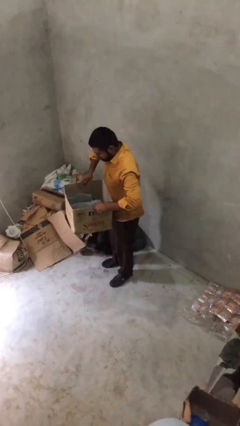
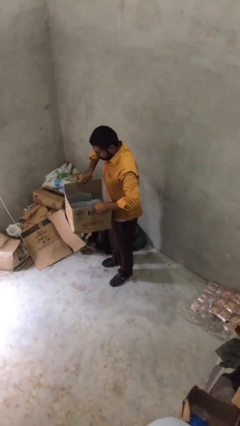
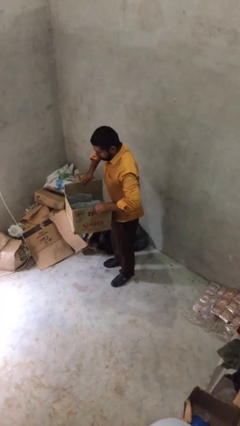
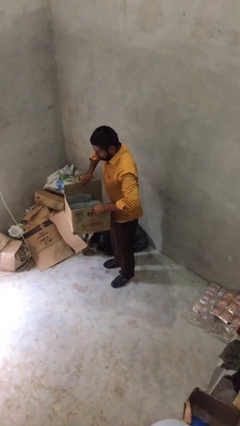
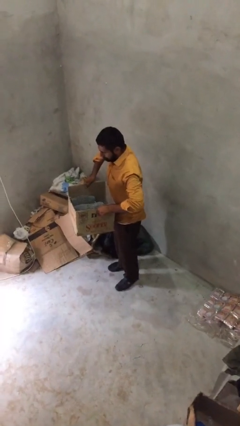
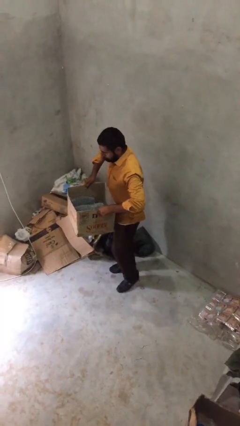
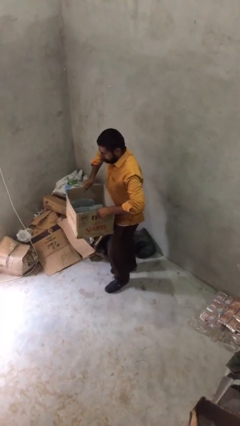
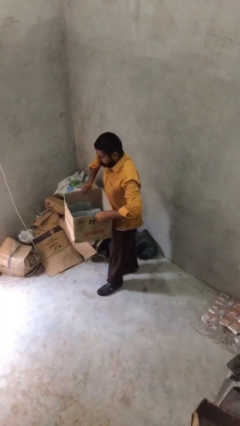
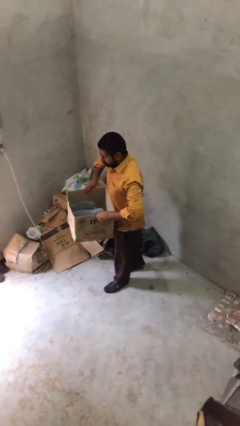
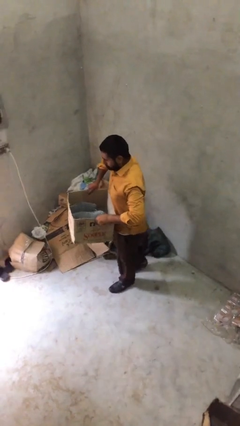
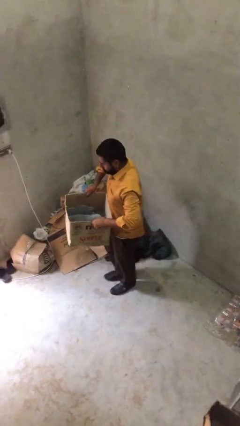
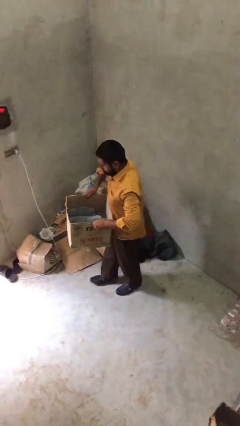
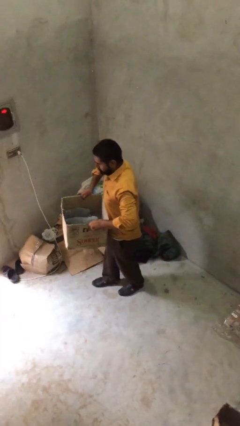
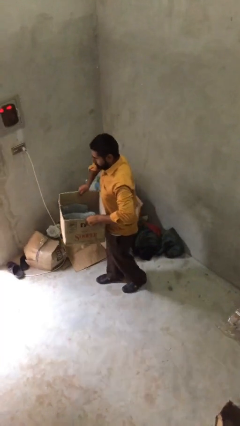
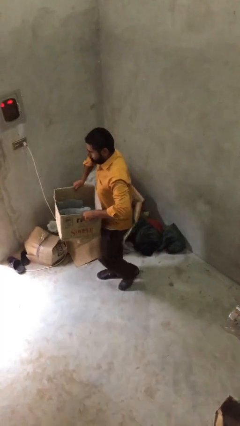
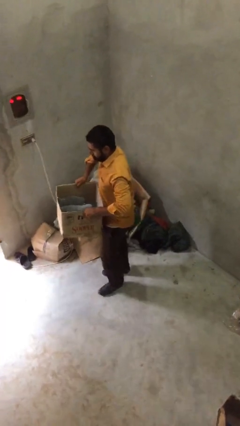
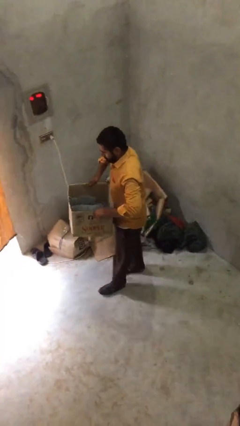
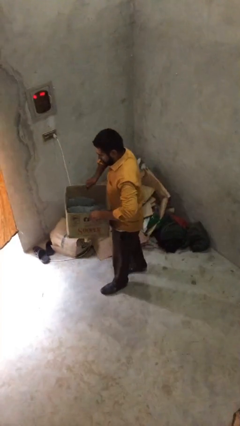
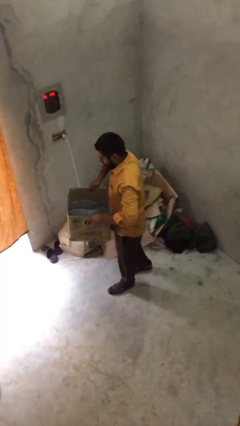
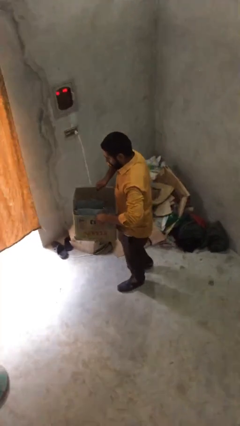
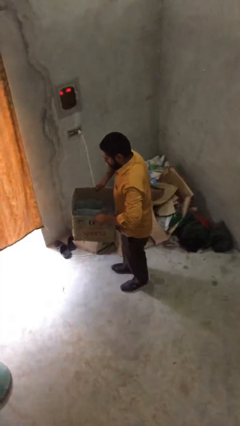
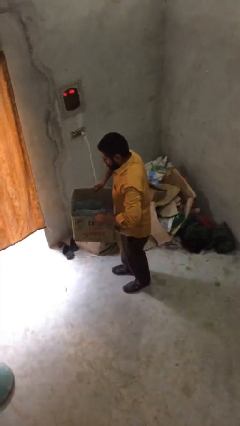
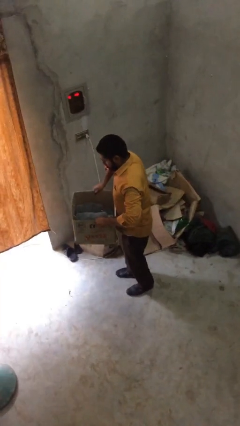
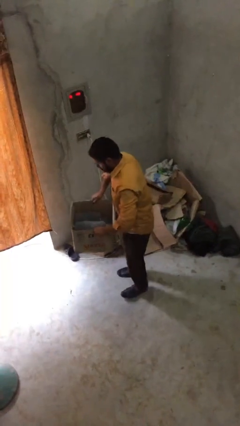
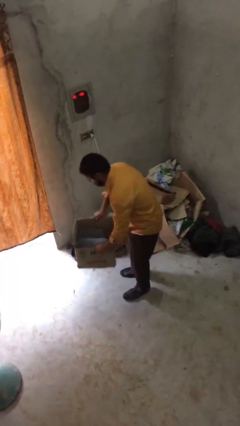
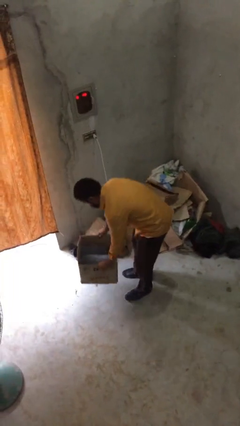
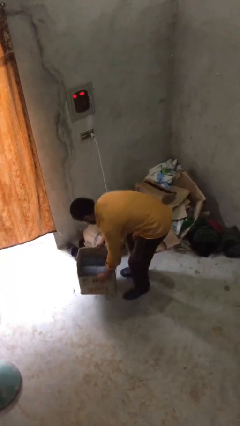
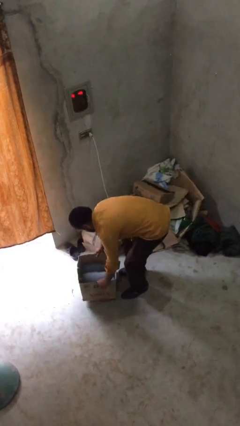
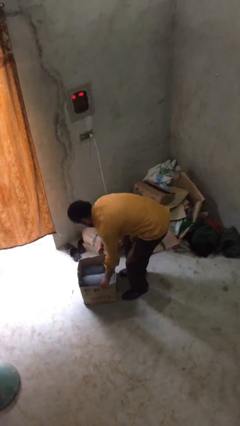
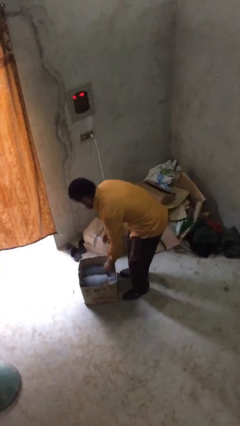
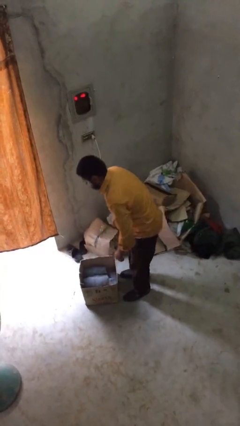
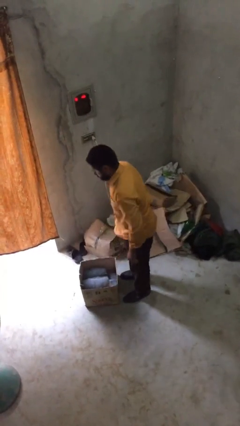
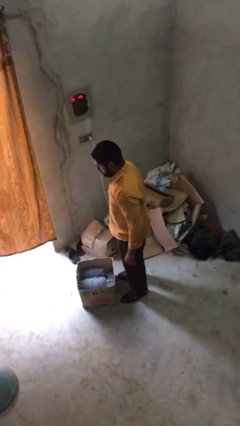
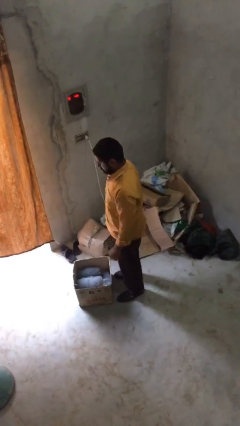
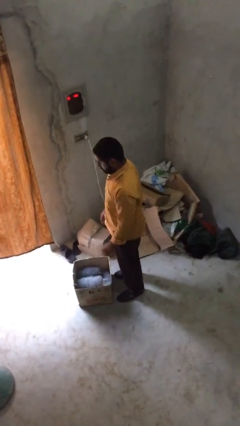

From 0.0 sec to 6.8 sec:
person carries heavy object

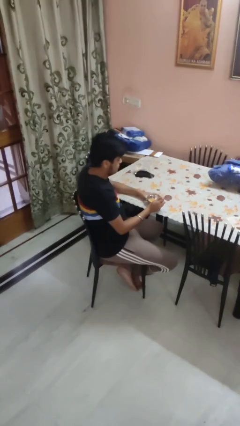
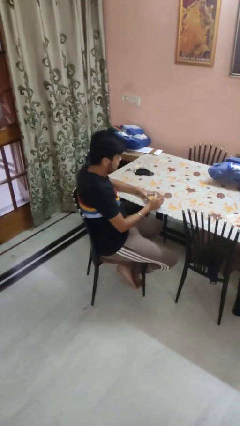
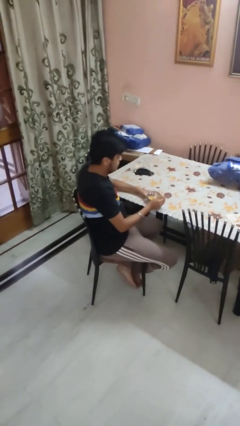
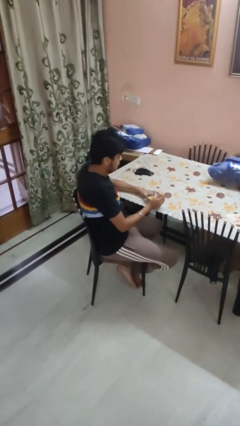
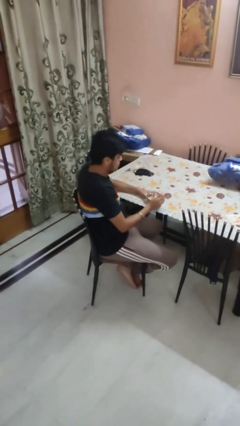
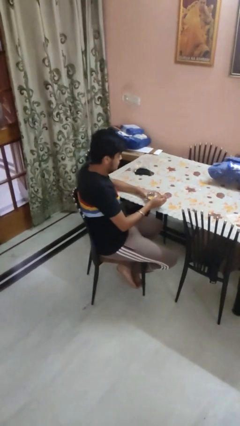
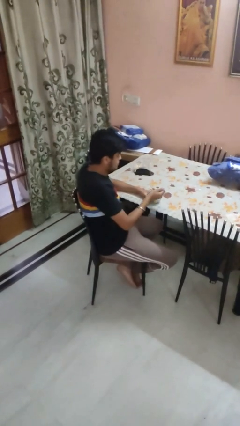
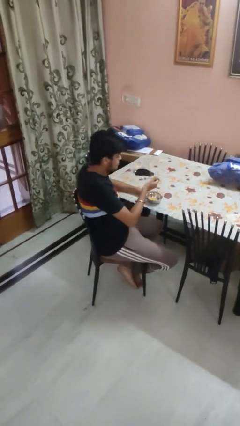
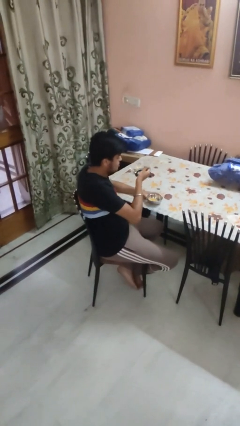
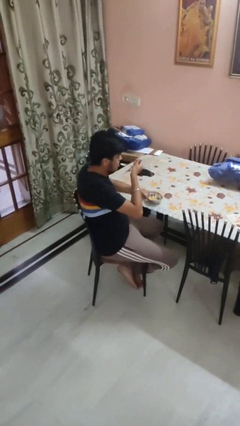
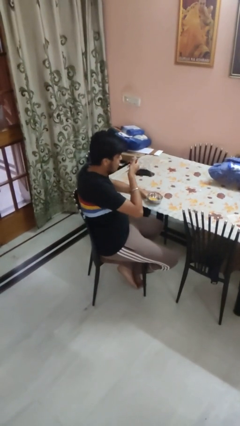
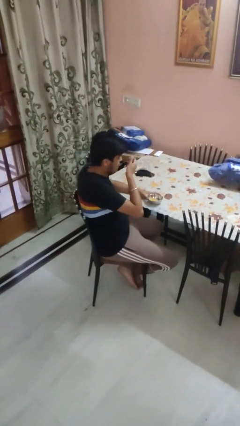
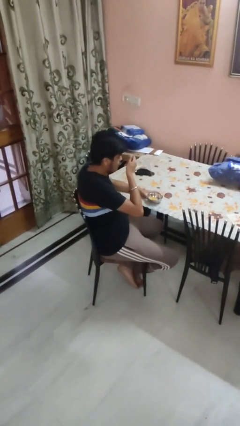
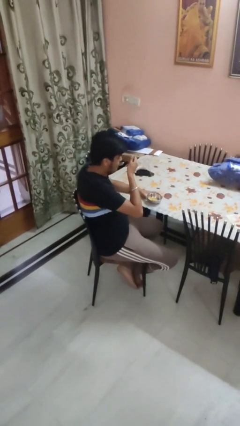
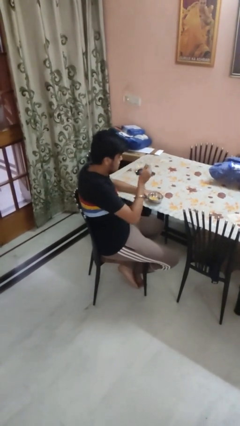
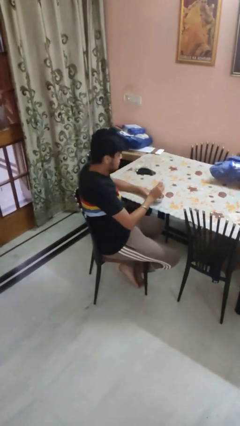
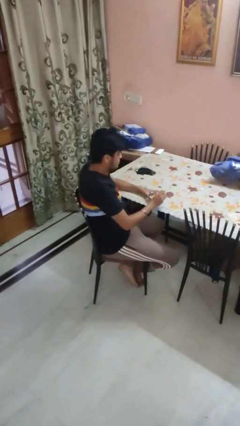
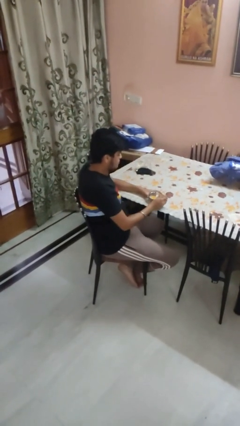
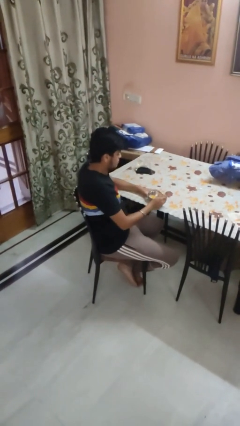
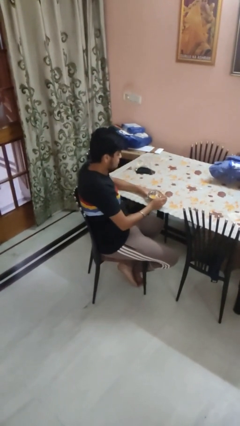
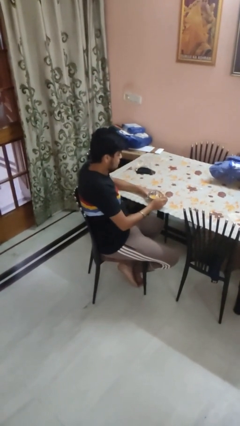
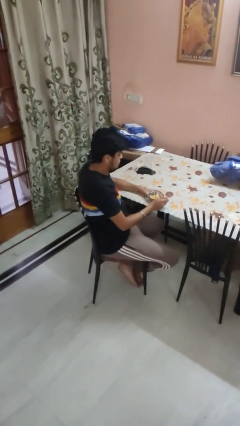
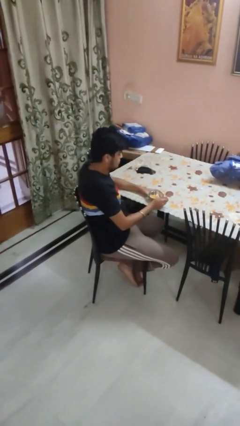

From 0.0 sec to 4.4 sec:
person eats with utensil

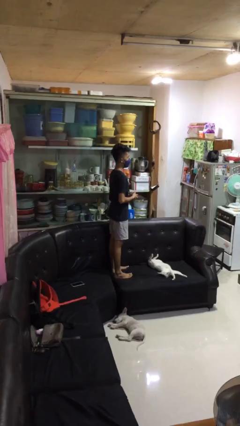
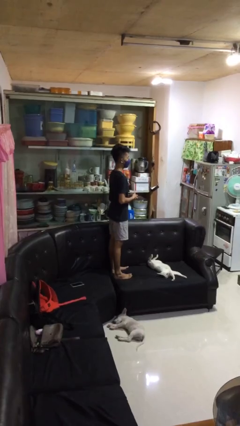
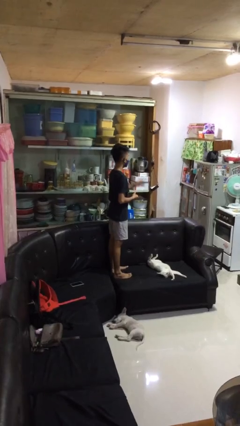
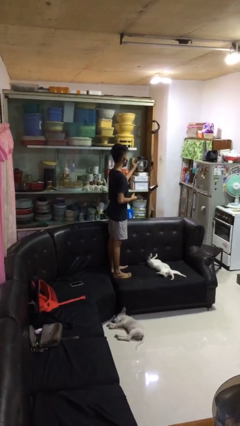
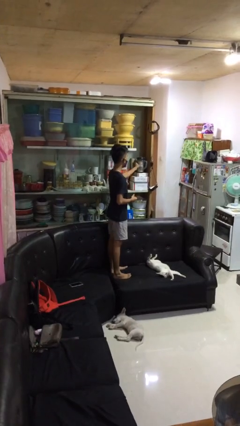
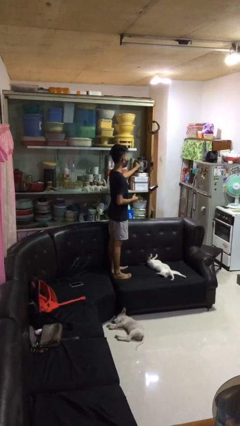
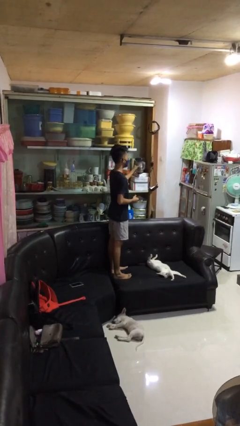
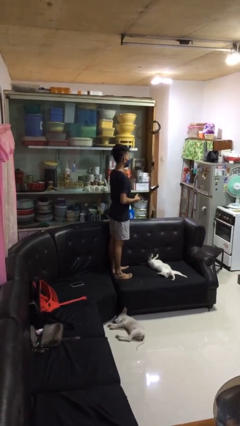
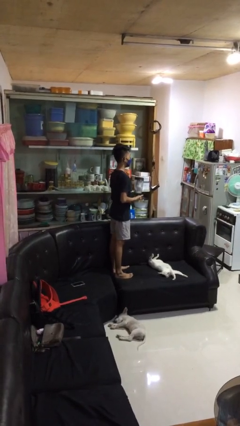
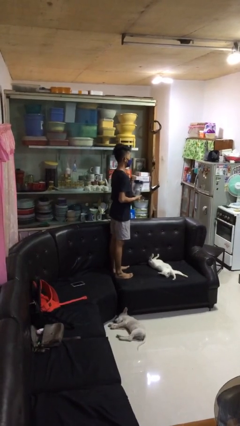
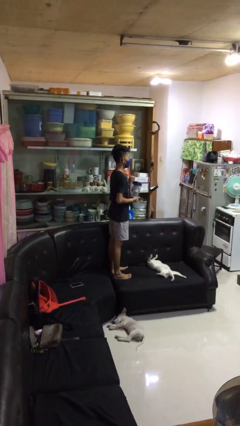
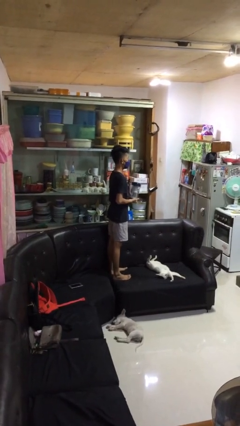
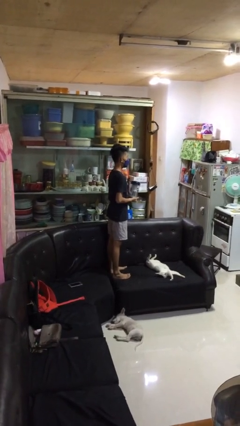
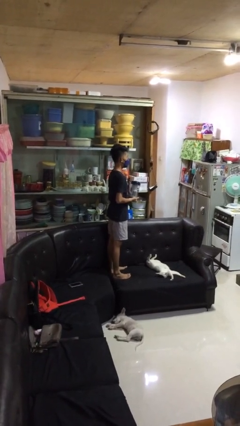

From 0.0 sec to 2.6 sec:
person picks up object from cabinet

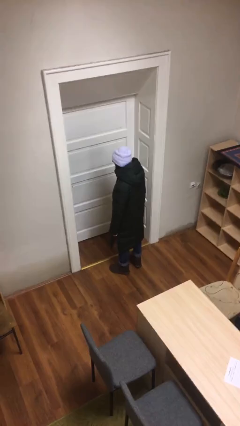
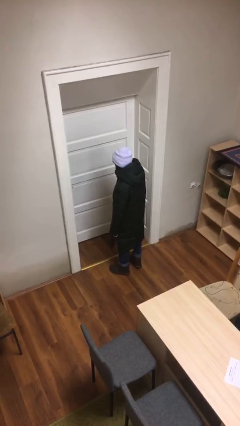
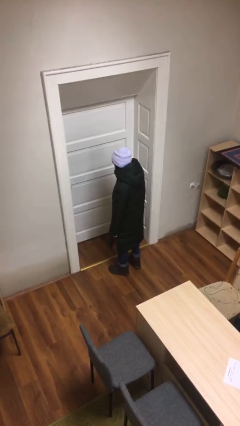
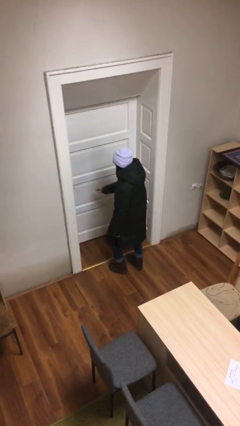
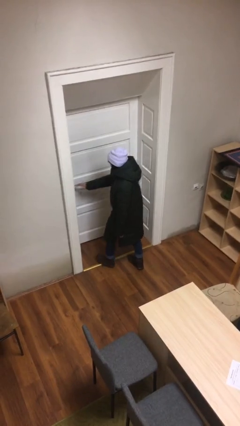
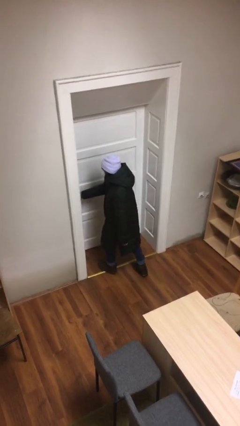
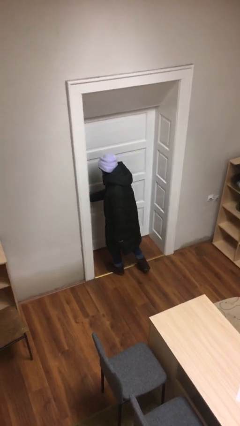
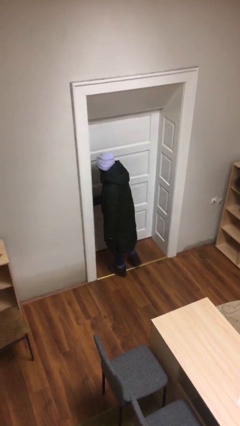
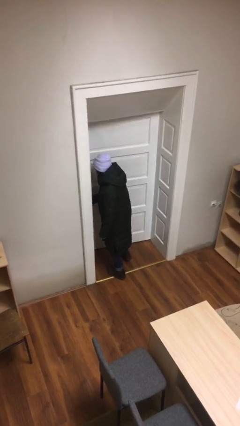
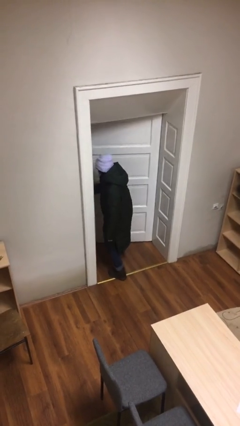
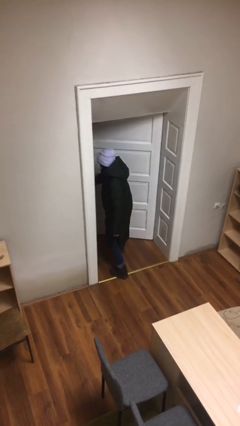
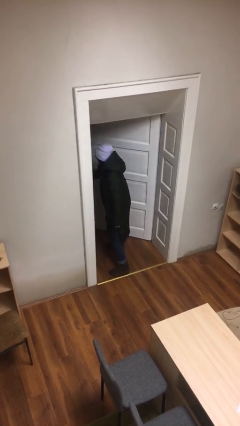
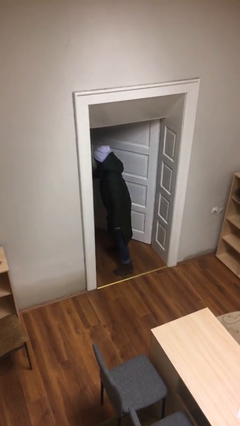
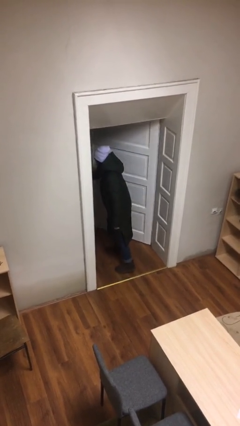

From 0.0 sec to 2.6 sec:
person opens facility door

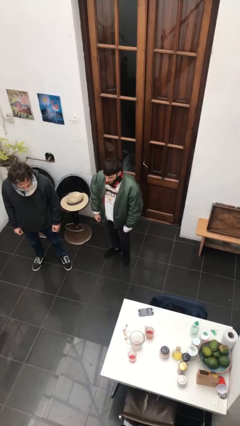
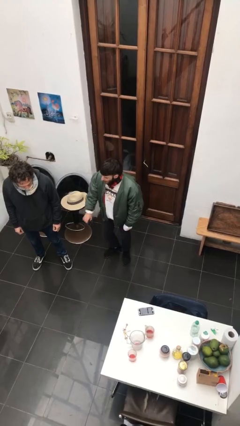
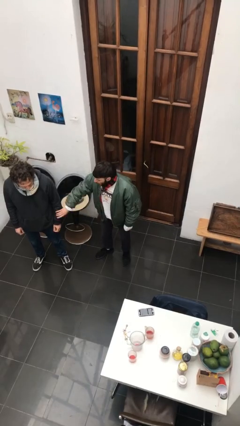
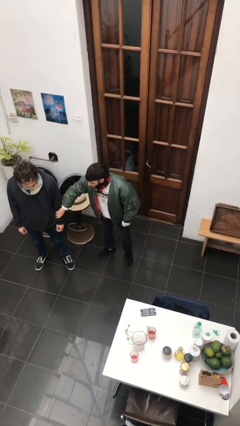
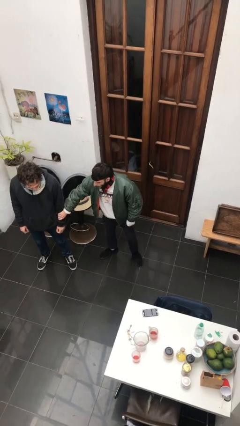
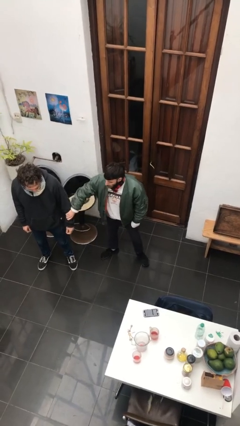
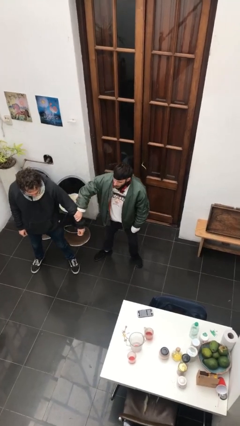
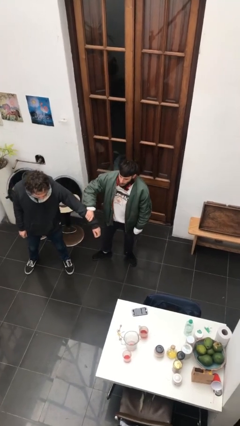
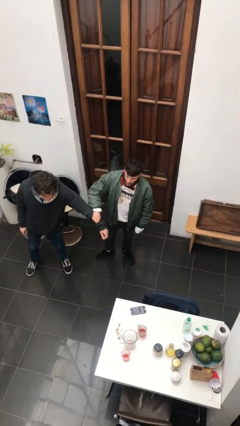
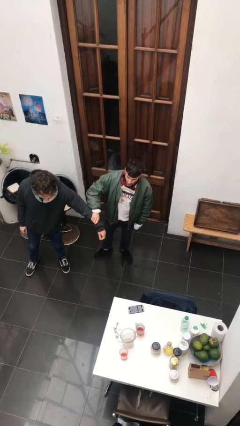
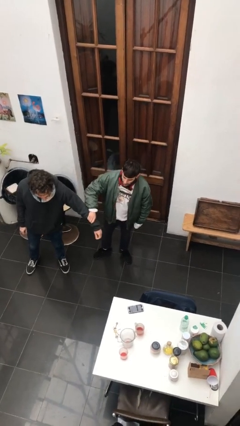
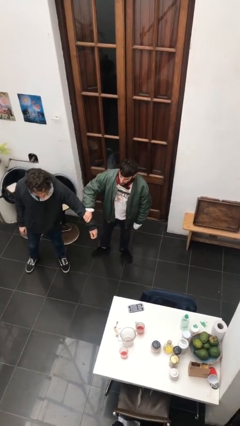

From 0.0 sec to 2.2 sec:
person grabs person by forearm
